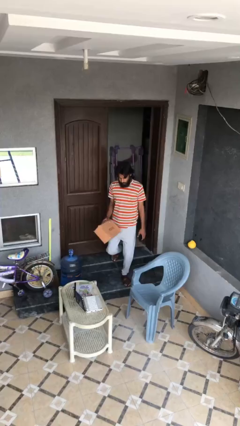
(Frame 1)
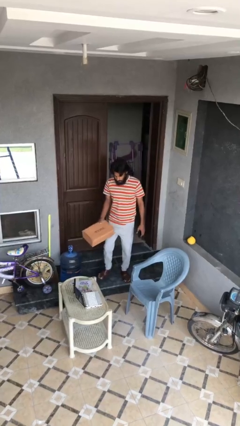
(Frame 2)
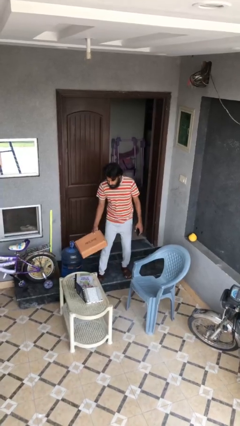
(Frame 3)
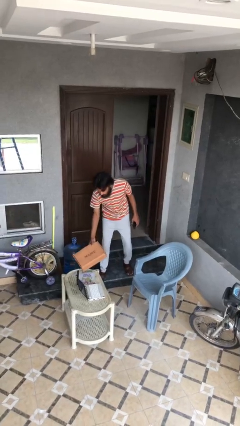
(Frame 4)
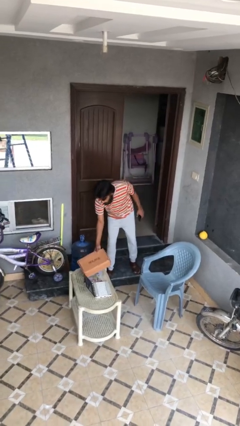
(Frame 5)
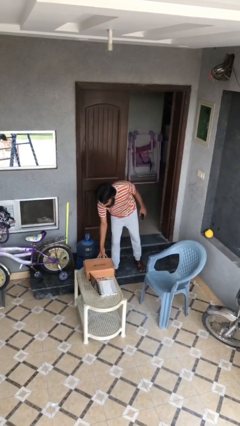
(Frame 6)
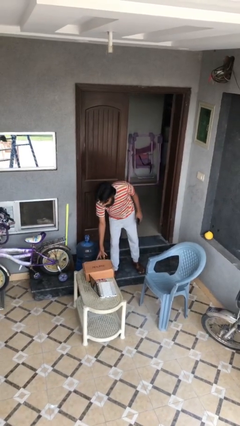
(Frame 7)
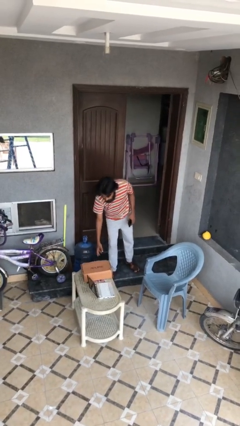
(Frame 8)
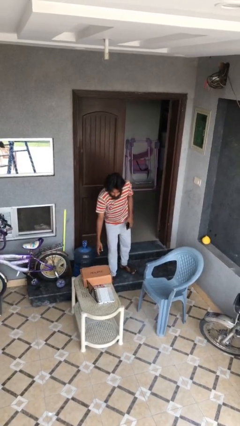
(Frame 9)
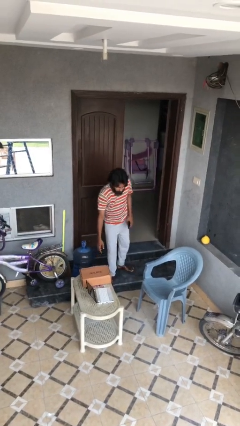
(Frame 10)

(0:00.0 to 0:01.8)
person puts down object on table

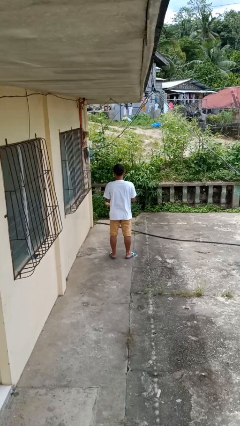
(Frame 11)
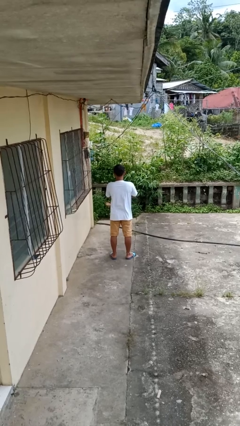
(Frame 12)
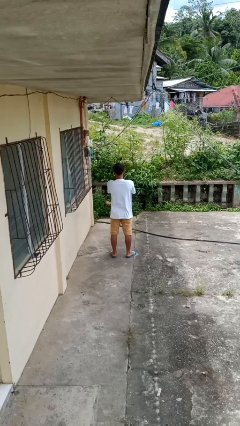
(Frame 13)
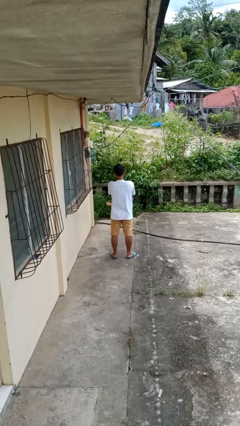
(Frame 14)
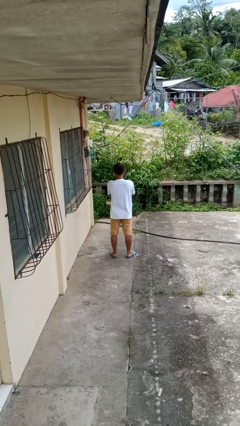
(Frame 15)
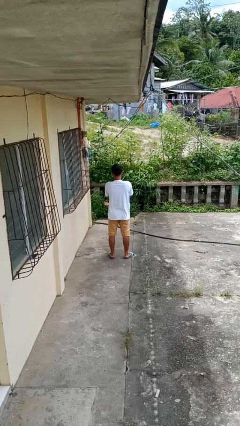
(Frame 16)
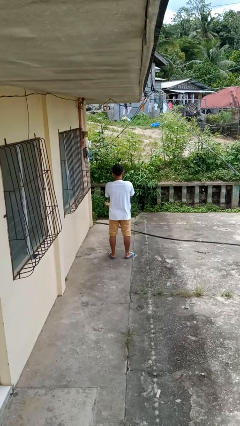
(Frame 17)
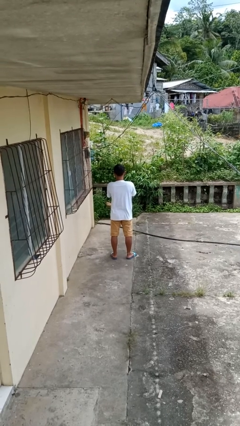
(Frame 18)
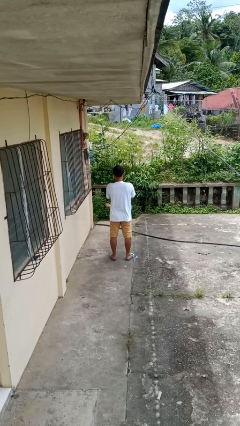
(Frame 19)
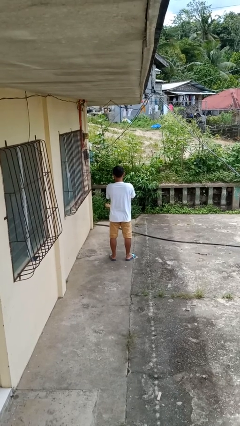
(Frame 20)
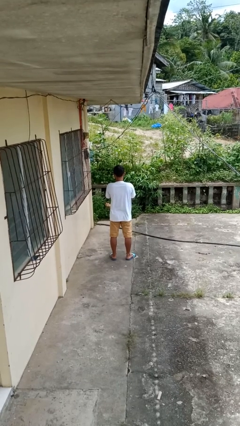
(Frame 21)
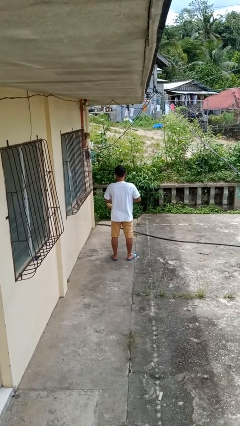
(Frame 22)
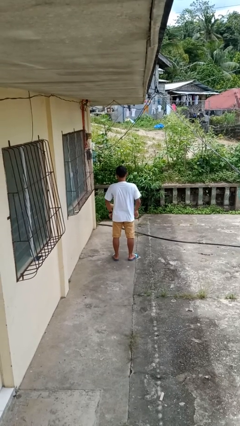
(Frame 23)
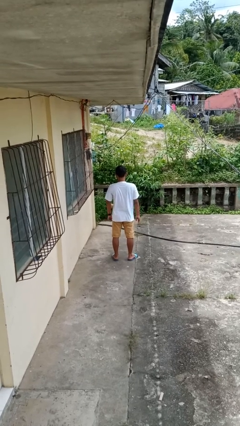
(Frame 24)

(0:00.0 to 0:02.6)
person crosses arms

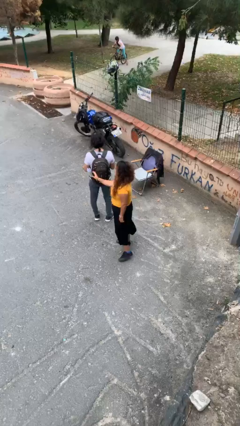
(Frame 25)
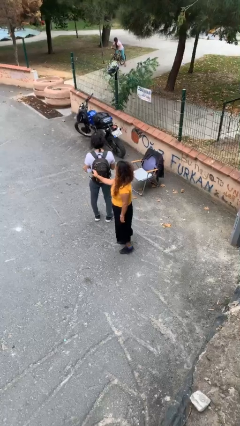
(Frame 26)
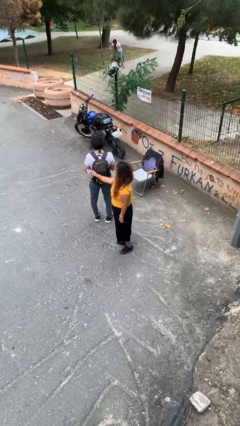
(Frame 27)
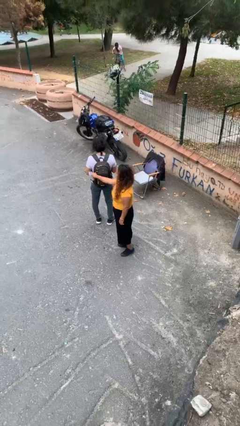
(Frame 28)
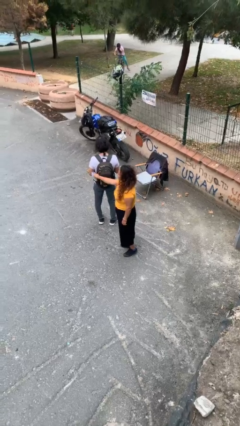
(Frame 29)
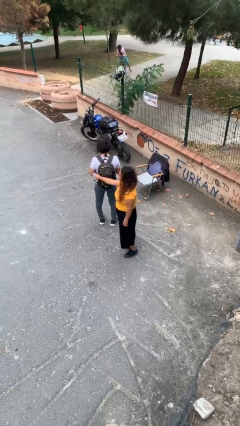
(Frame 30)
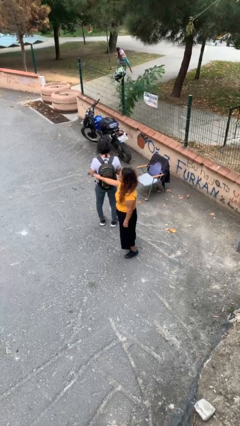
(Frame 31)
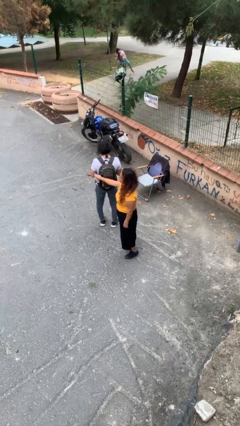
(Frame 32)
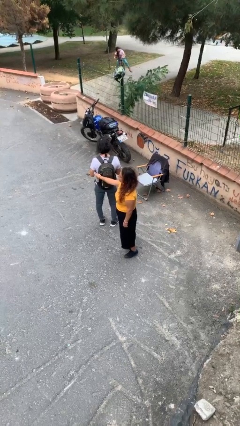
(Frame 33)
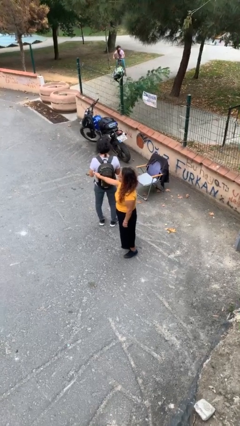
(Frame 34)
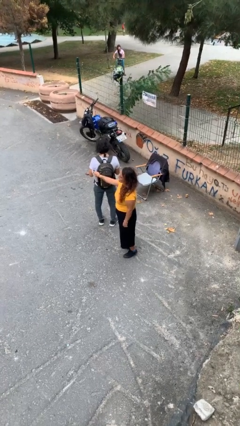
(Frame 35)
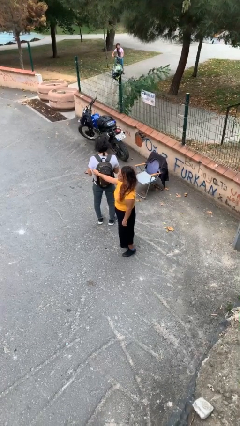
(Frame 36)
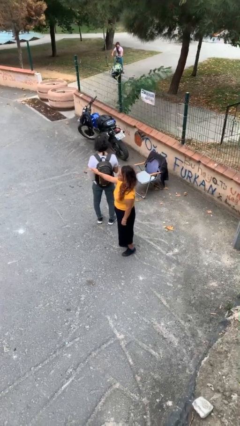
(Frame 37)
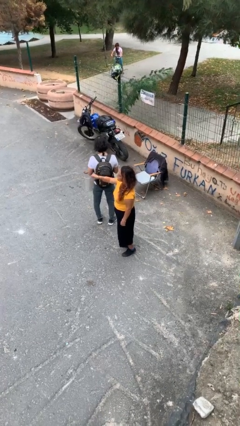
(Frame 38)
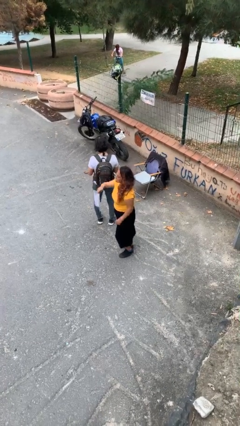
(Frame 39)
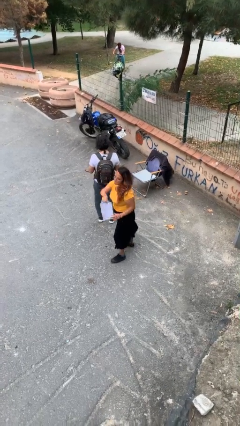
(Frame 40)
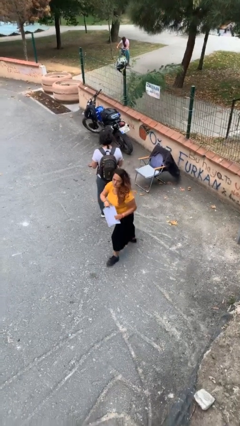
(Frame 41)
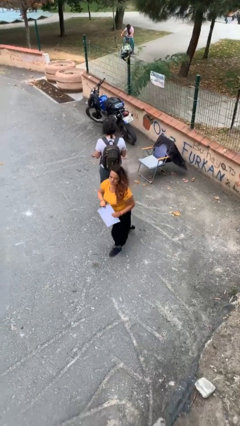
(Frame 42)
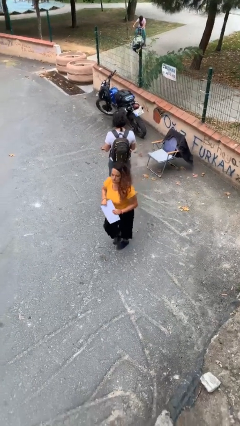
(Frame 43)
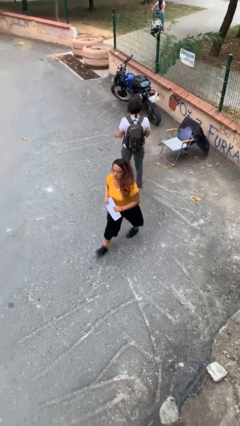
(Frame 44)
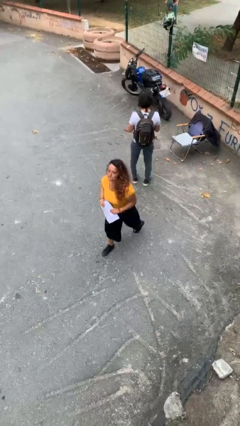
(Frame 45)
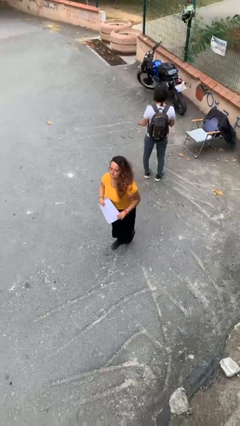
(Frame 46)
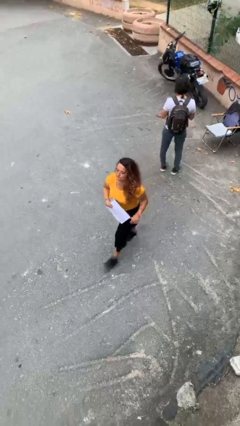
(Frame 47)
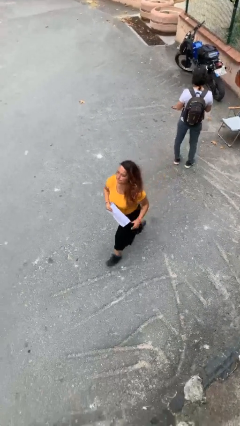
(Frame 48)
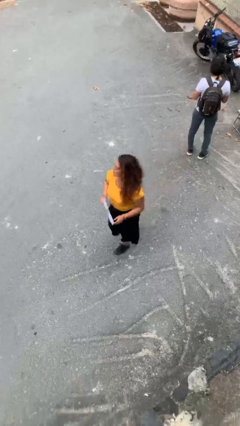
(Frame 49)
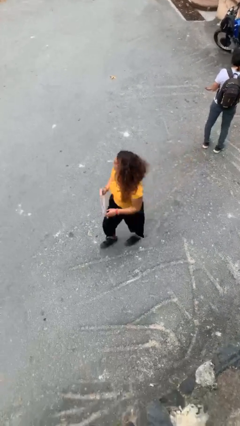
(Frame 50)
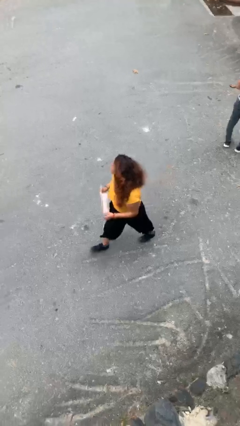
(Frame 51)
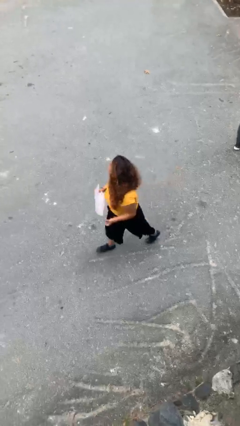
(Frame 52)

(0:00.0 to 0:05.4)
person steals object from person

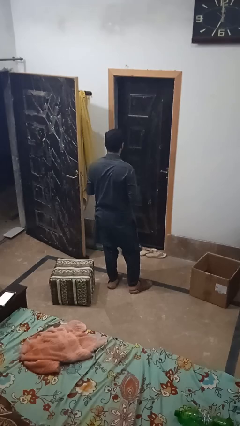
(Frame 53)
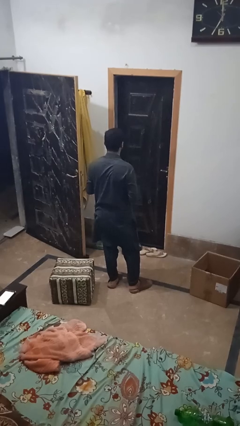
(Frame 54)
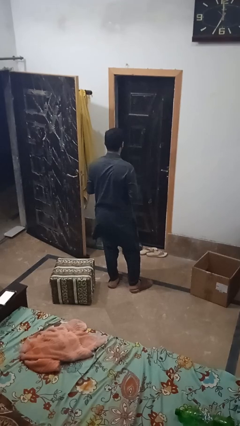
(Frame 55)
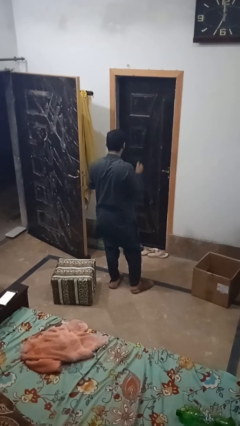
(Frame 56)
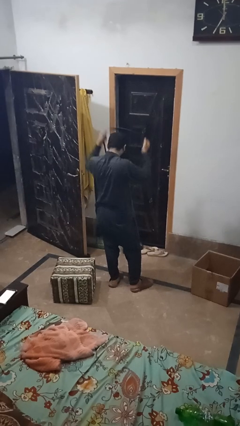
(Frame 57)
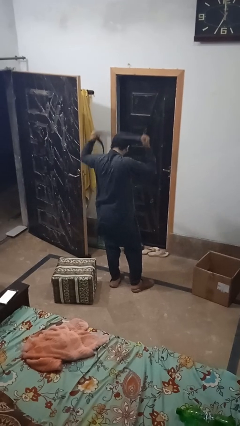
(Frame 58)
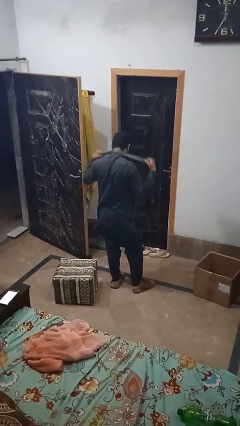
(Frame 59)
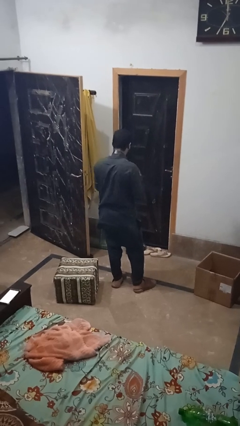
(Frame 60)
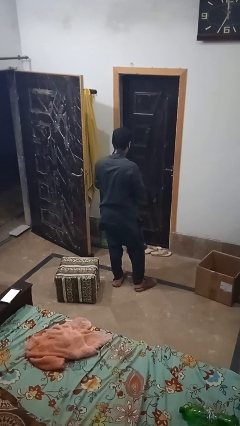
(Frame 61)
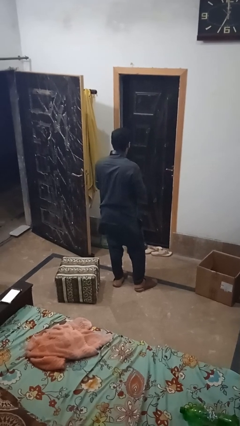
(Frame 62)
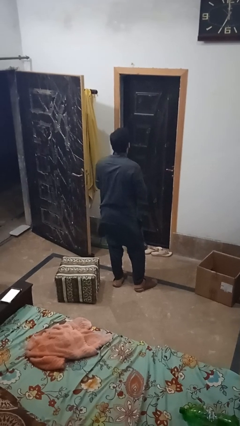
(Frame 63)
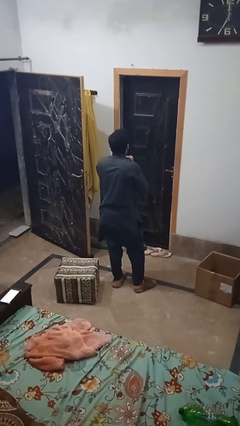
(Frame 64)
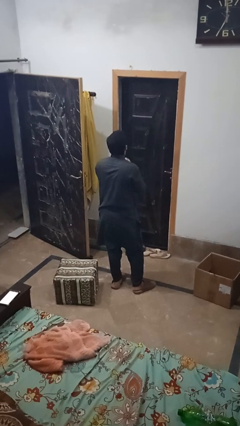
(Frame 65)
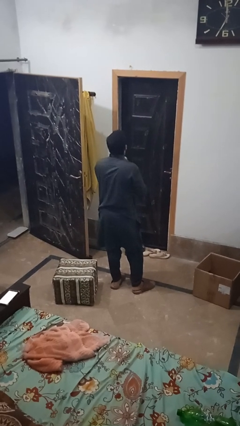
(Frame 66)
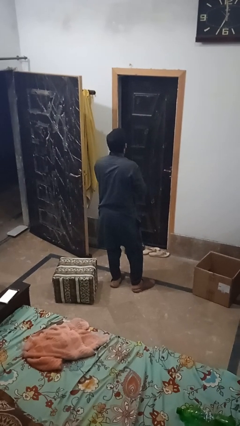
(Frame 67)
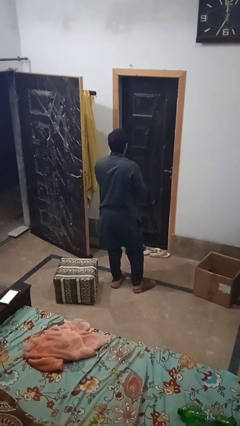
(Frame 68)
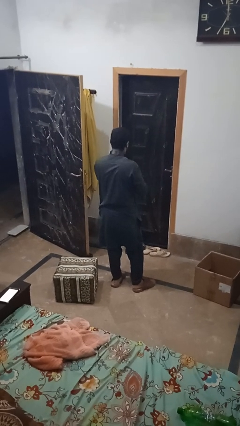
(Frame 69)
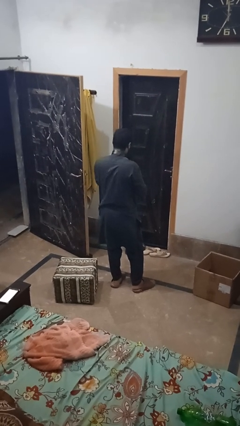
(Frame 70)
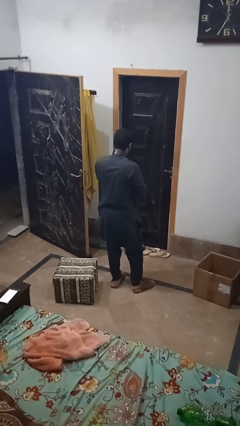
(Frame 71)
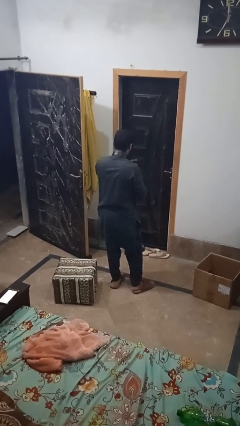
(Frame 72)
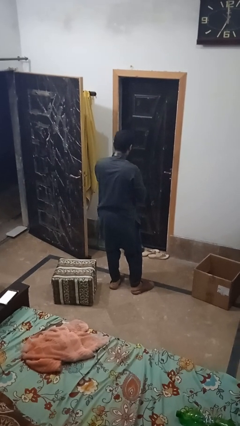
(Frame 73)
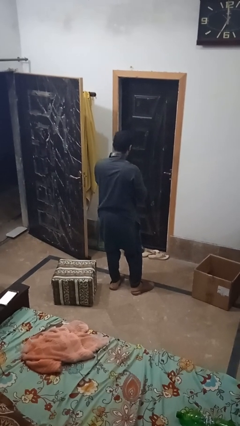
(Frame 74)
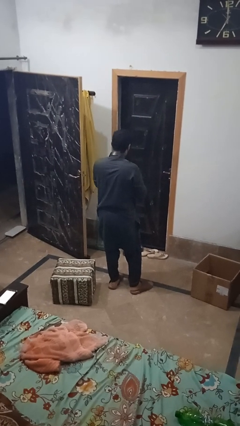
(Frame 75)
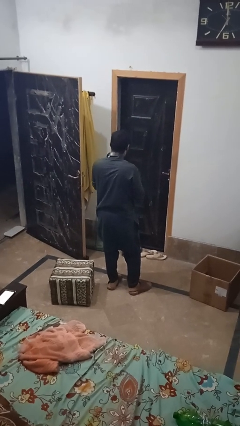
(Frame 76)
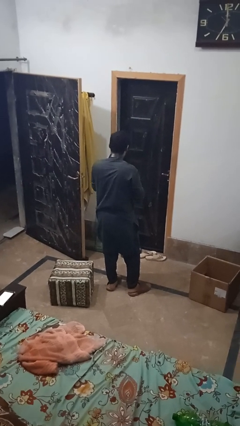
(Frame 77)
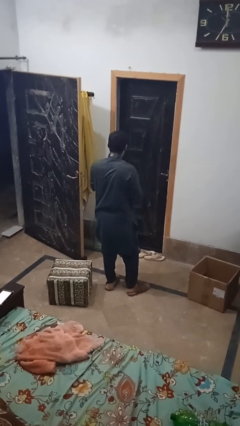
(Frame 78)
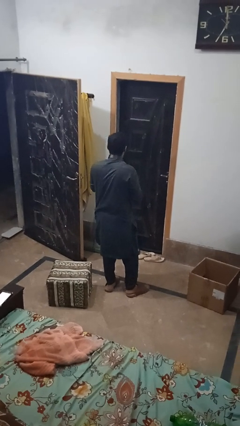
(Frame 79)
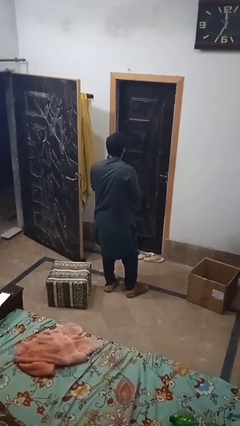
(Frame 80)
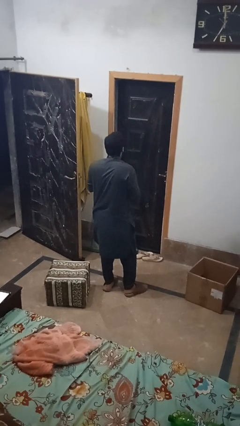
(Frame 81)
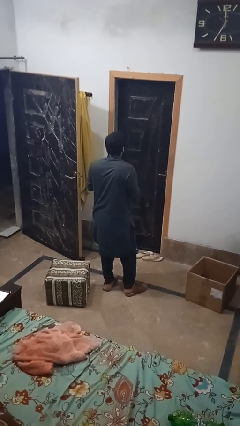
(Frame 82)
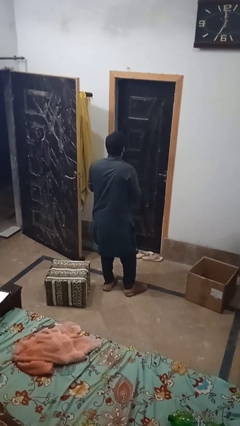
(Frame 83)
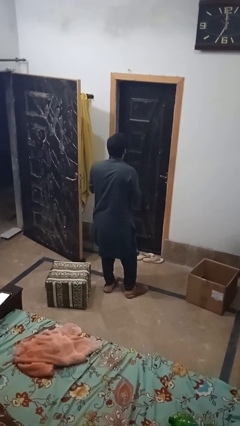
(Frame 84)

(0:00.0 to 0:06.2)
person puts on necktie

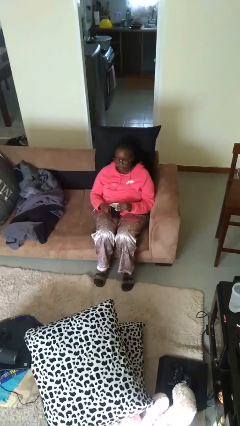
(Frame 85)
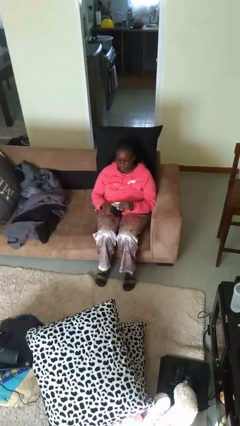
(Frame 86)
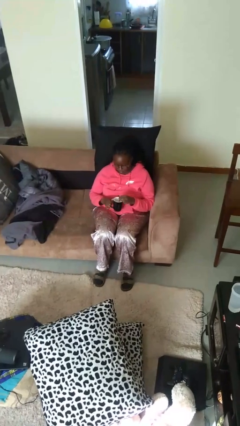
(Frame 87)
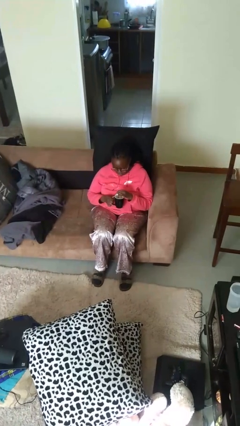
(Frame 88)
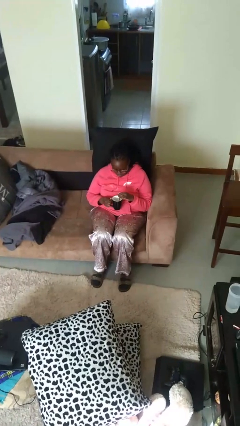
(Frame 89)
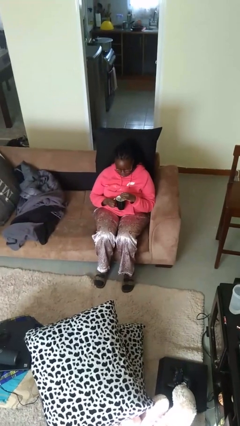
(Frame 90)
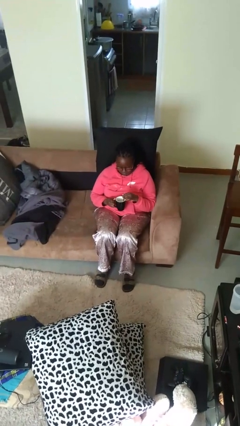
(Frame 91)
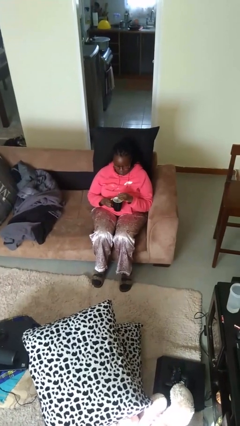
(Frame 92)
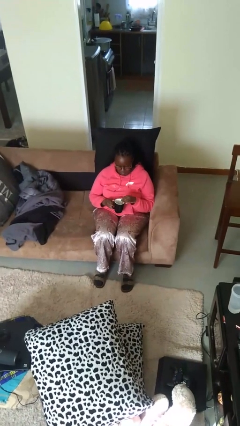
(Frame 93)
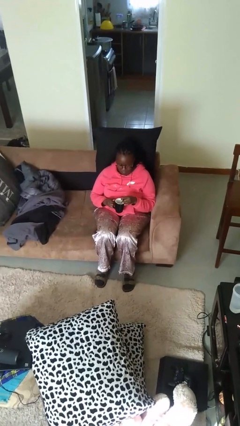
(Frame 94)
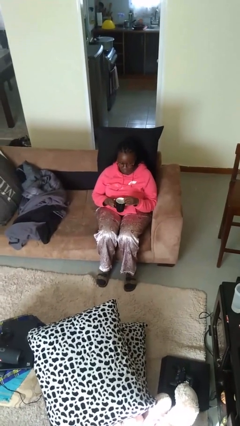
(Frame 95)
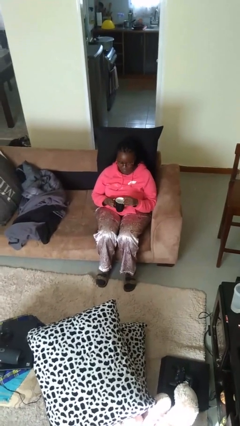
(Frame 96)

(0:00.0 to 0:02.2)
person stirs mug
